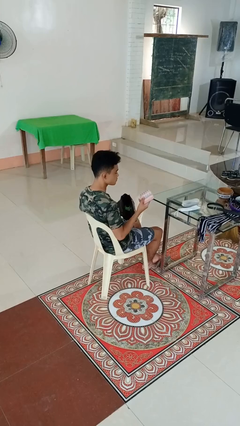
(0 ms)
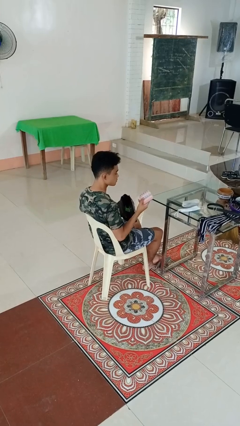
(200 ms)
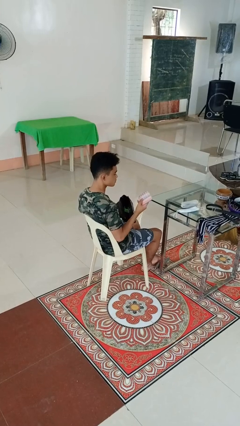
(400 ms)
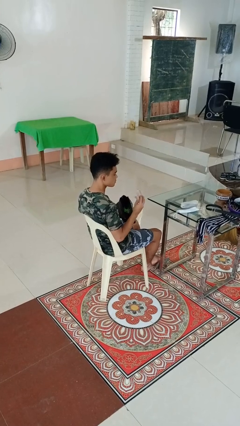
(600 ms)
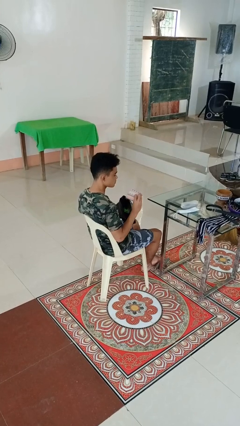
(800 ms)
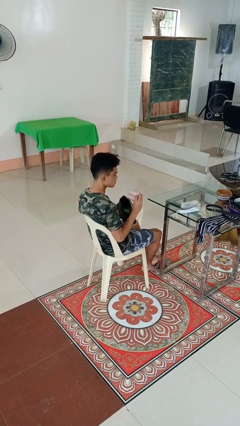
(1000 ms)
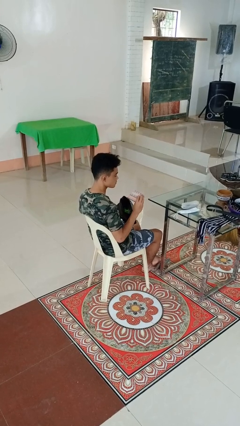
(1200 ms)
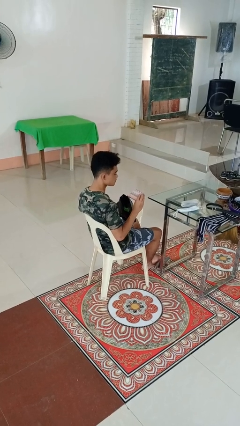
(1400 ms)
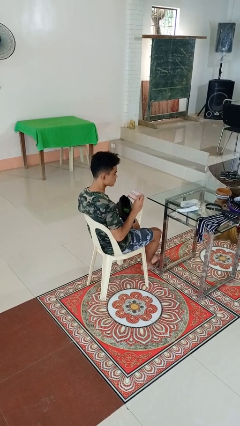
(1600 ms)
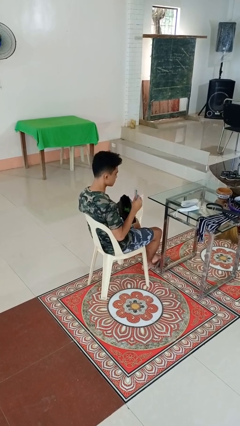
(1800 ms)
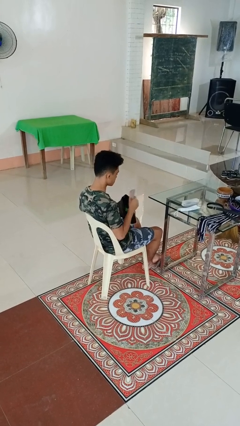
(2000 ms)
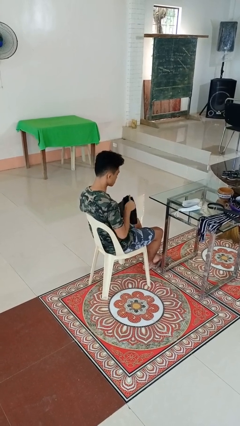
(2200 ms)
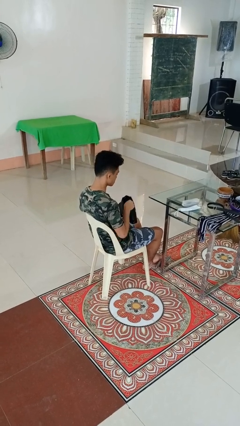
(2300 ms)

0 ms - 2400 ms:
person takes object from purse

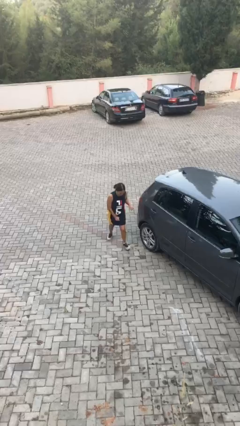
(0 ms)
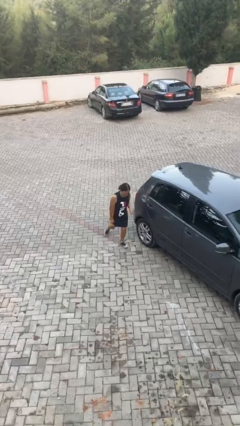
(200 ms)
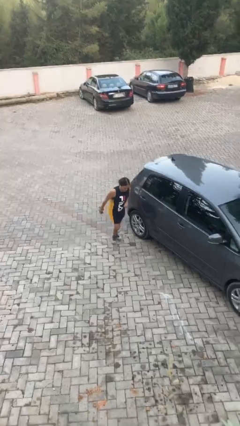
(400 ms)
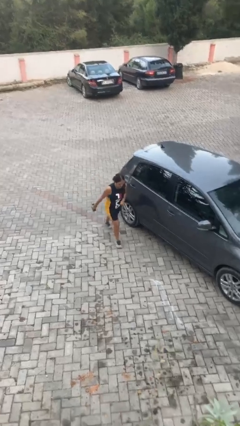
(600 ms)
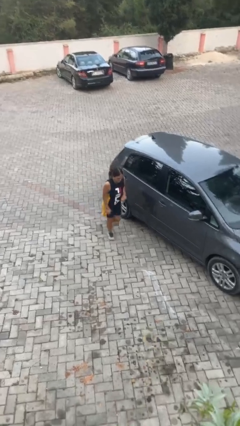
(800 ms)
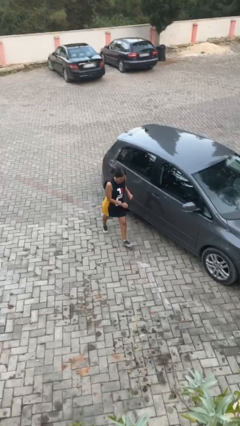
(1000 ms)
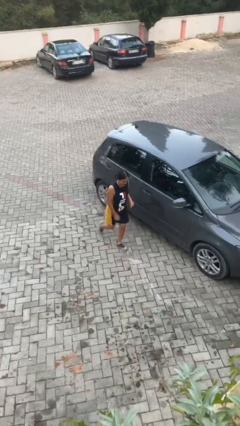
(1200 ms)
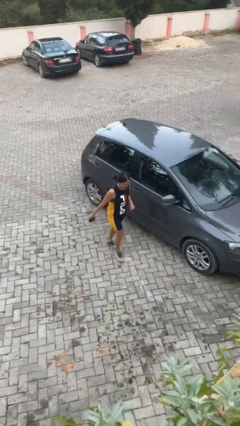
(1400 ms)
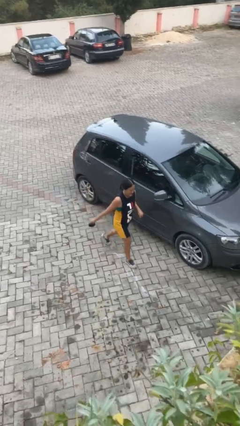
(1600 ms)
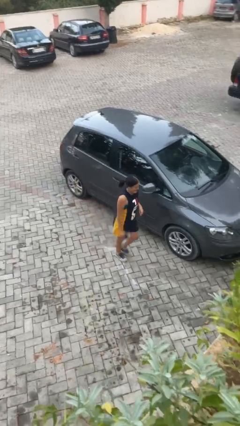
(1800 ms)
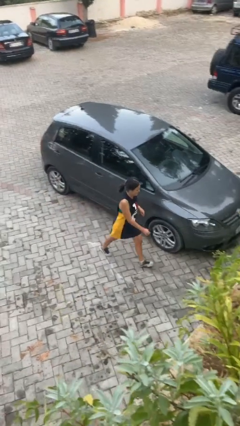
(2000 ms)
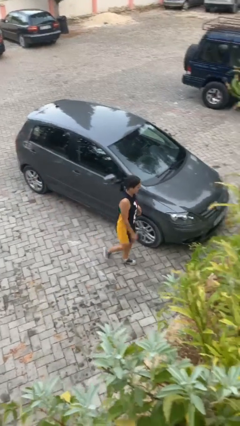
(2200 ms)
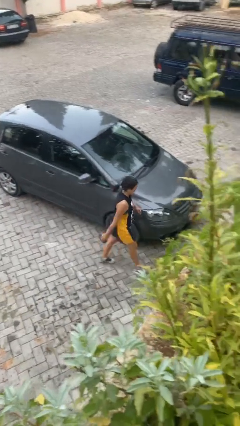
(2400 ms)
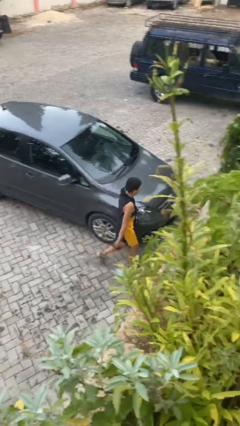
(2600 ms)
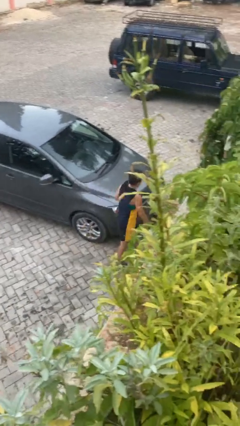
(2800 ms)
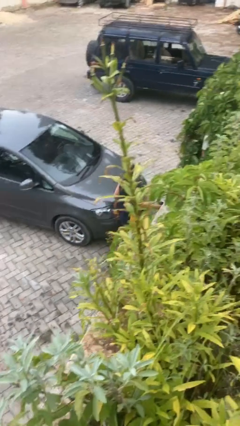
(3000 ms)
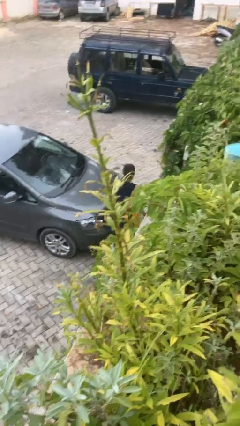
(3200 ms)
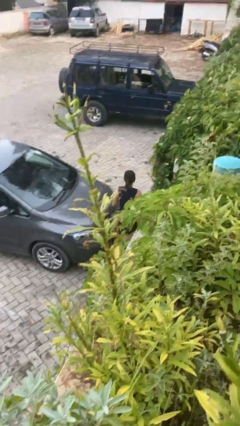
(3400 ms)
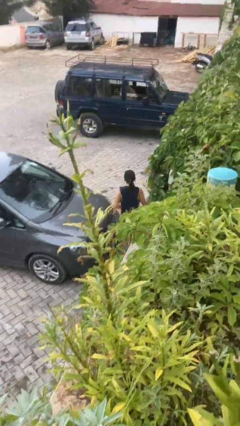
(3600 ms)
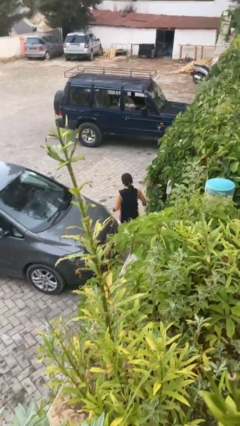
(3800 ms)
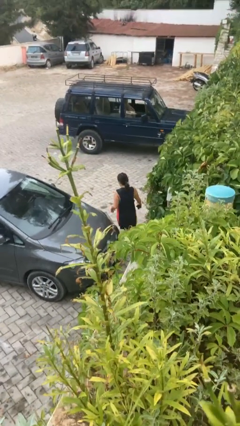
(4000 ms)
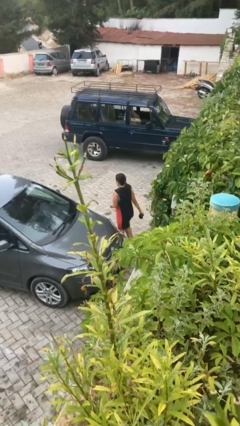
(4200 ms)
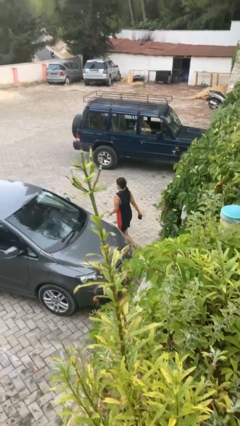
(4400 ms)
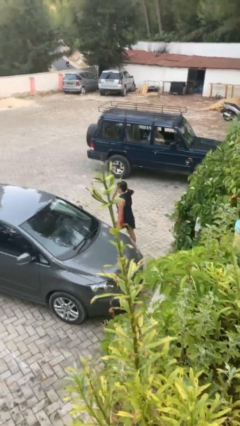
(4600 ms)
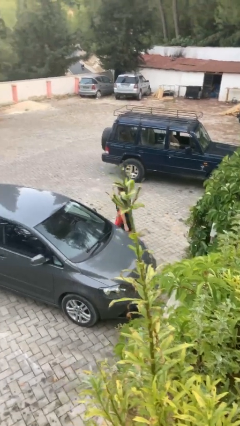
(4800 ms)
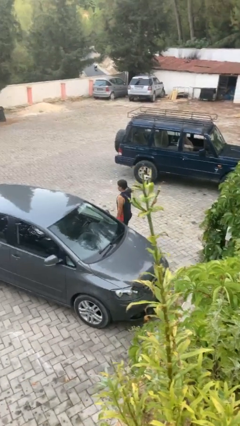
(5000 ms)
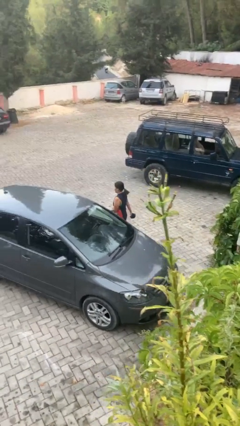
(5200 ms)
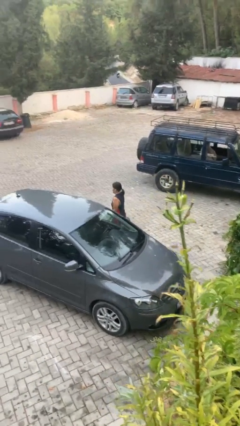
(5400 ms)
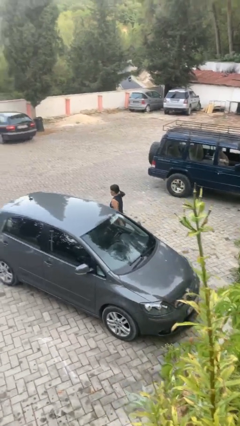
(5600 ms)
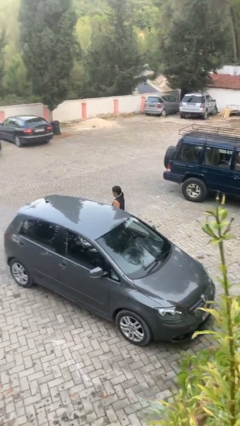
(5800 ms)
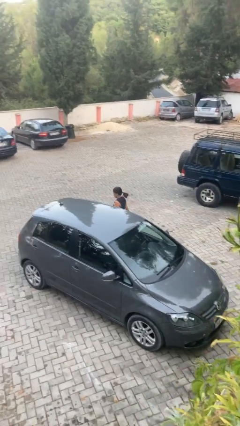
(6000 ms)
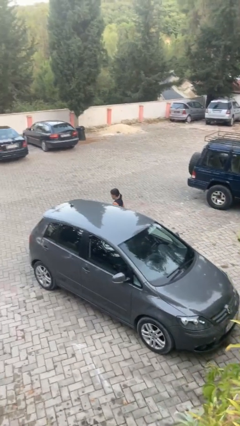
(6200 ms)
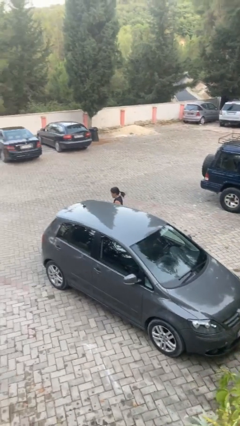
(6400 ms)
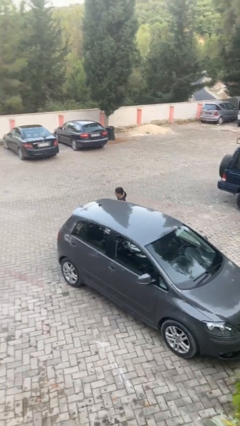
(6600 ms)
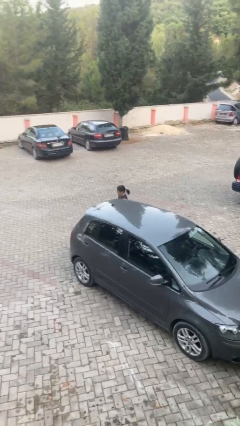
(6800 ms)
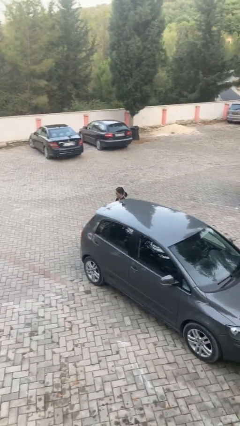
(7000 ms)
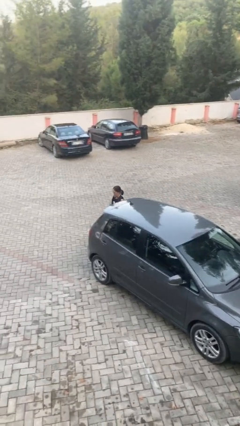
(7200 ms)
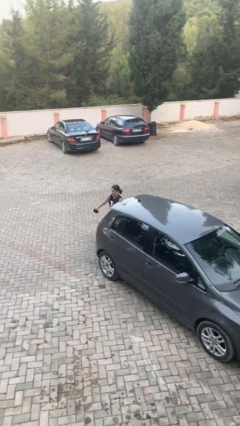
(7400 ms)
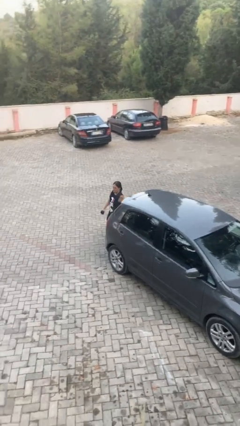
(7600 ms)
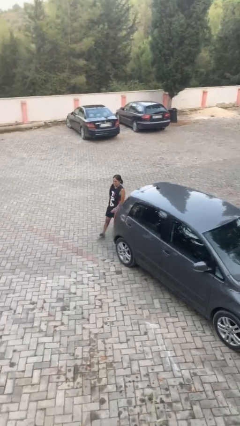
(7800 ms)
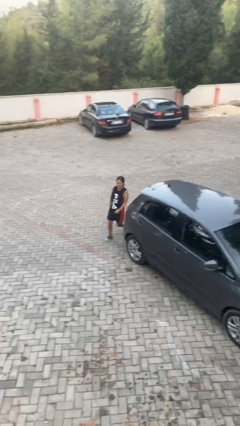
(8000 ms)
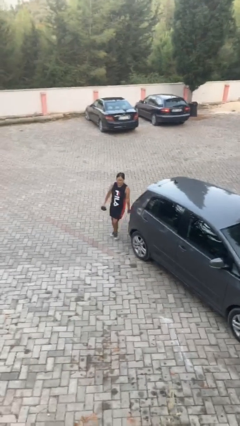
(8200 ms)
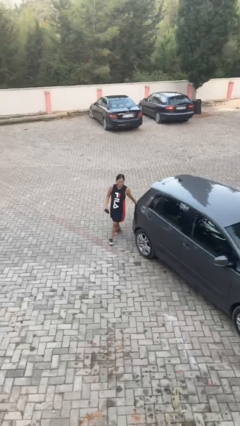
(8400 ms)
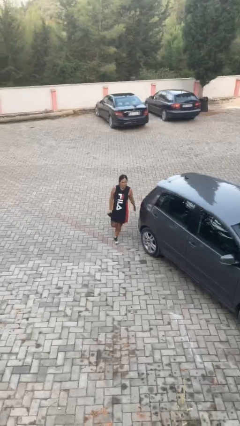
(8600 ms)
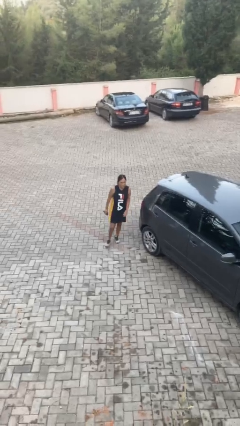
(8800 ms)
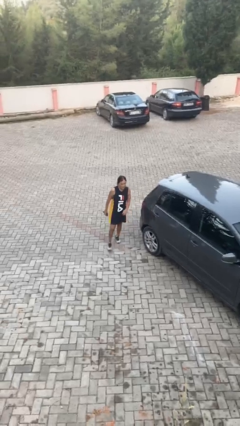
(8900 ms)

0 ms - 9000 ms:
person walks around car

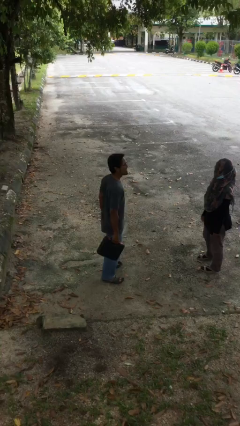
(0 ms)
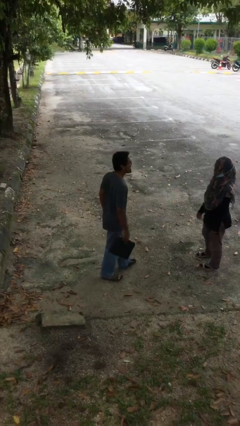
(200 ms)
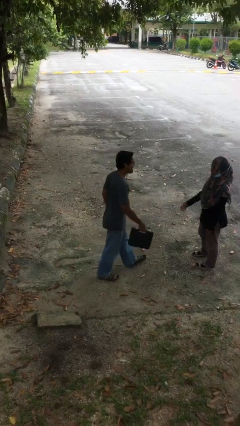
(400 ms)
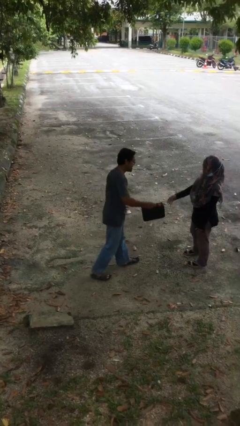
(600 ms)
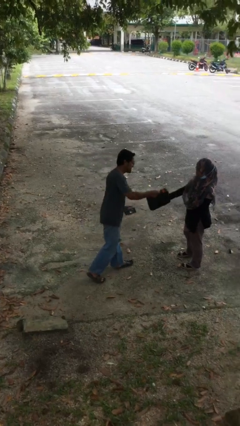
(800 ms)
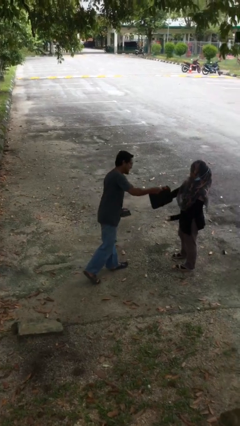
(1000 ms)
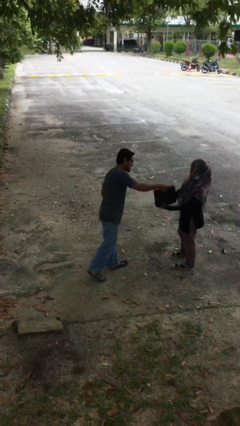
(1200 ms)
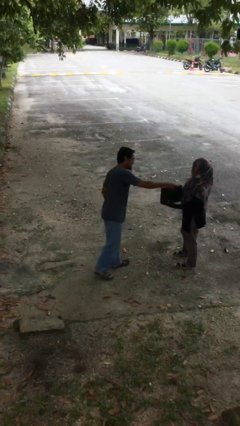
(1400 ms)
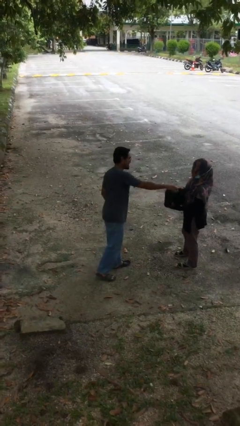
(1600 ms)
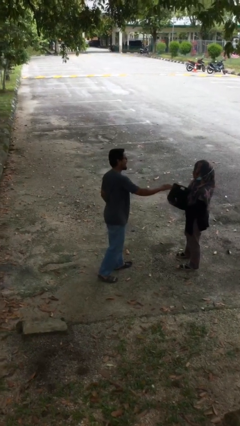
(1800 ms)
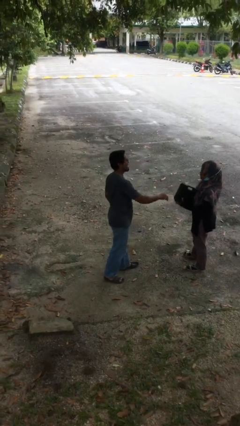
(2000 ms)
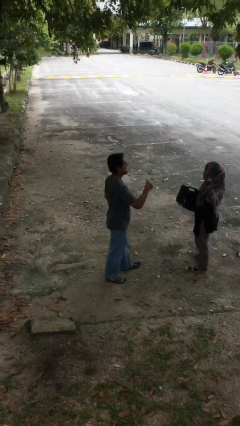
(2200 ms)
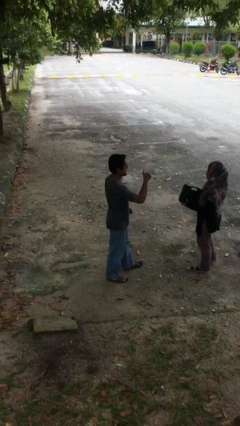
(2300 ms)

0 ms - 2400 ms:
person transfers object to person

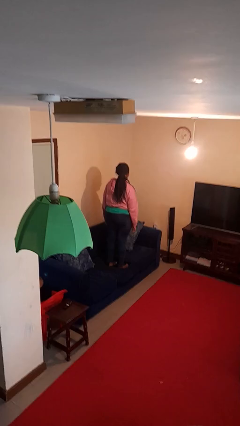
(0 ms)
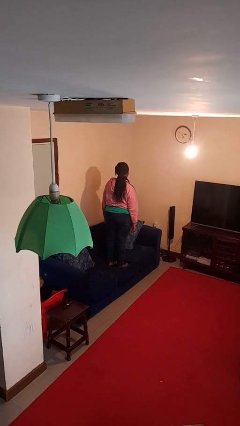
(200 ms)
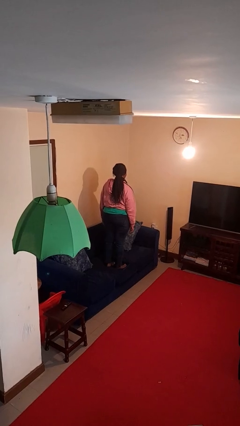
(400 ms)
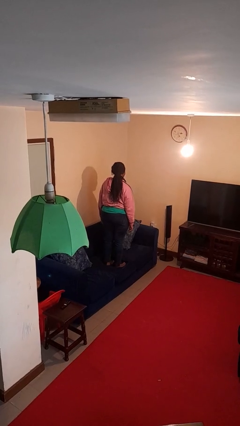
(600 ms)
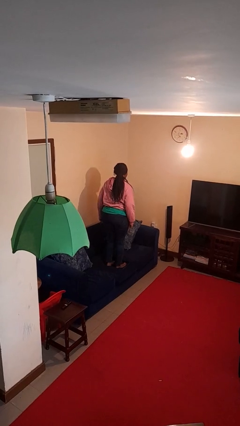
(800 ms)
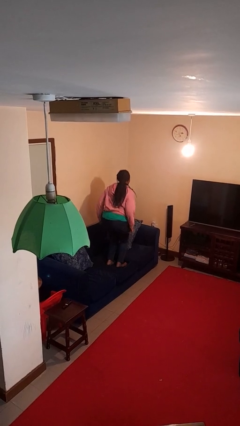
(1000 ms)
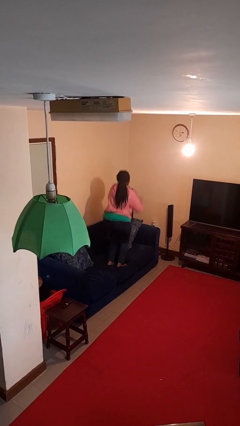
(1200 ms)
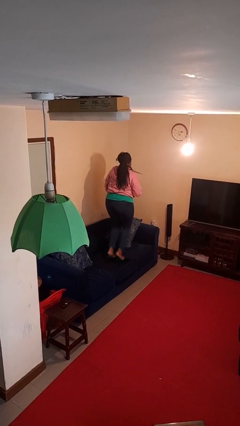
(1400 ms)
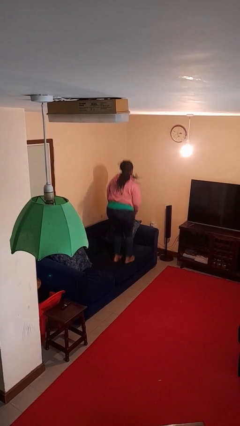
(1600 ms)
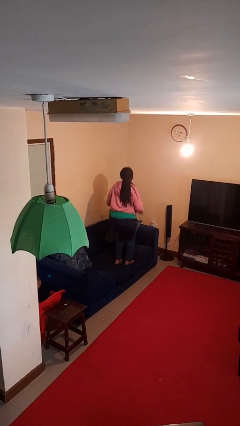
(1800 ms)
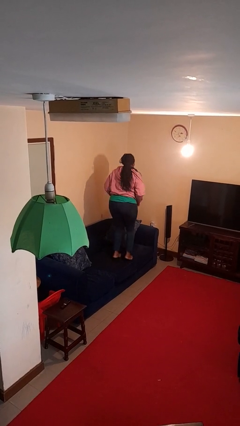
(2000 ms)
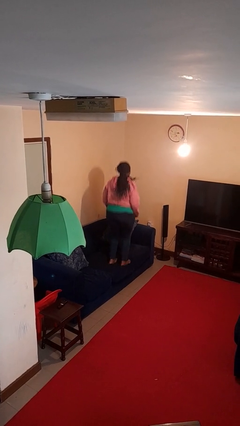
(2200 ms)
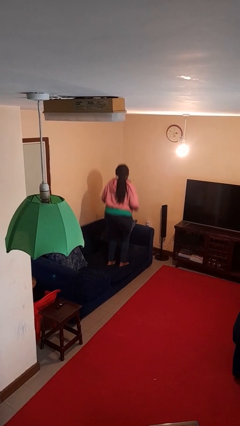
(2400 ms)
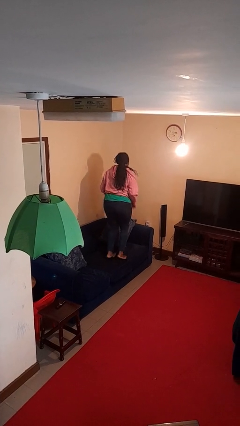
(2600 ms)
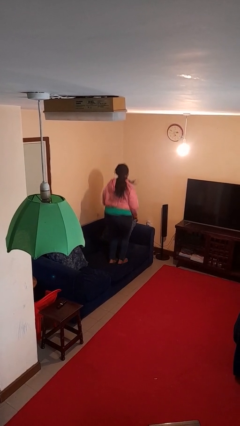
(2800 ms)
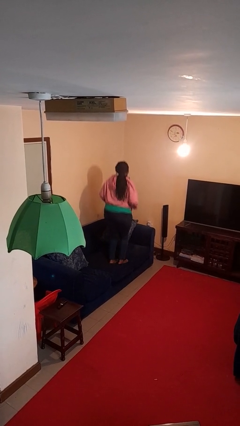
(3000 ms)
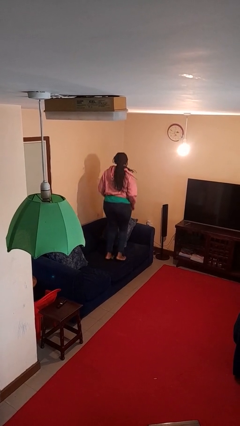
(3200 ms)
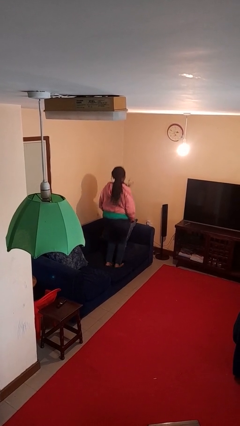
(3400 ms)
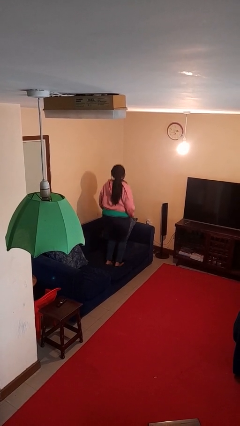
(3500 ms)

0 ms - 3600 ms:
person jumps on couch

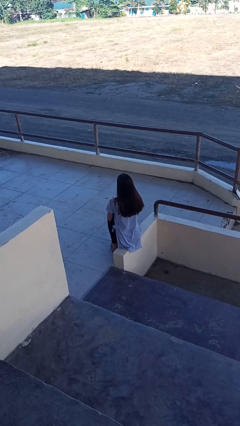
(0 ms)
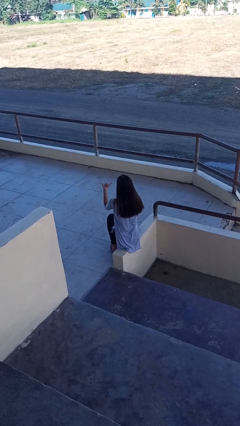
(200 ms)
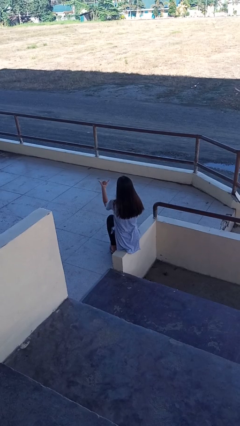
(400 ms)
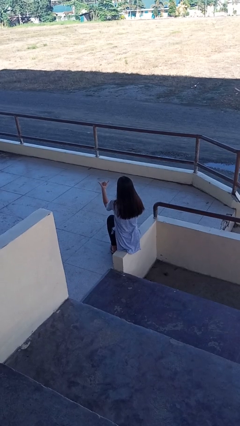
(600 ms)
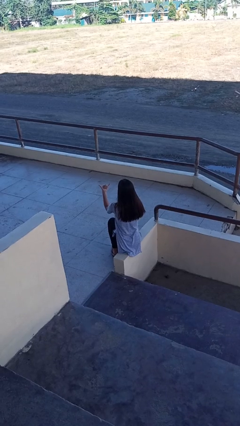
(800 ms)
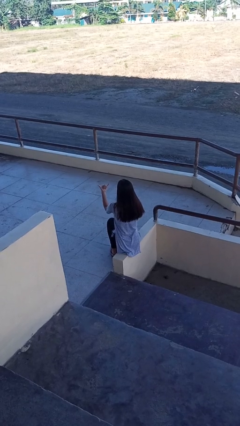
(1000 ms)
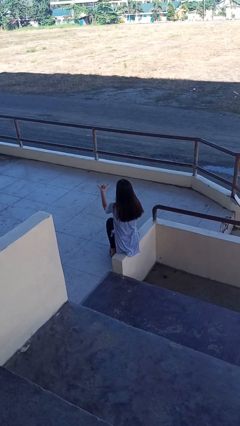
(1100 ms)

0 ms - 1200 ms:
person gestures hang loose
